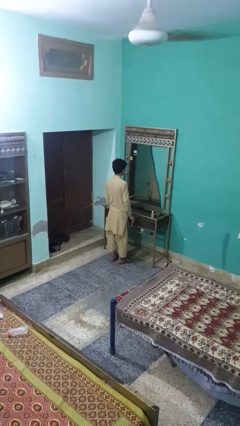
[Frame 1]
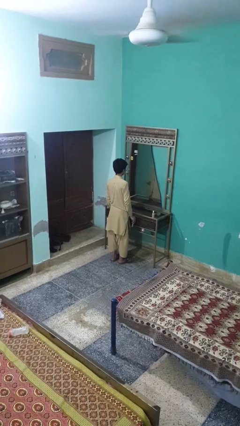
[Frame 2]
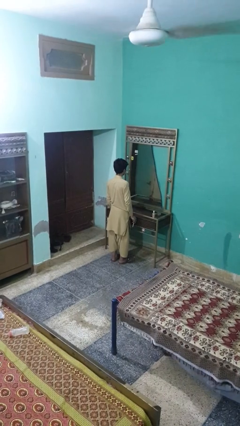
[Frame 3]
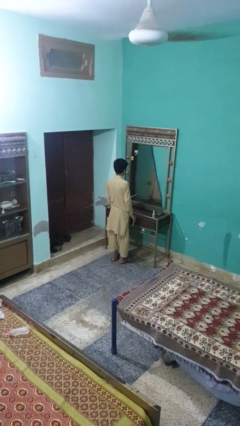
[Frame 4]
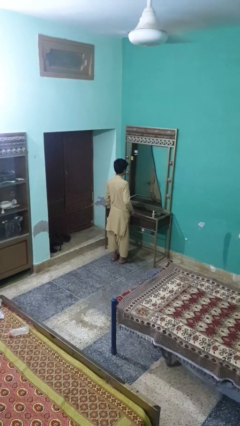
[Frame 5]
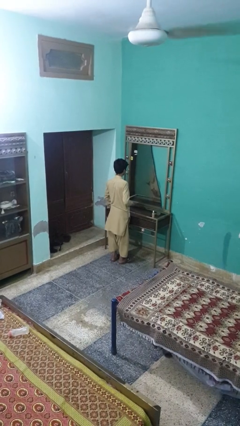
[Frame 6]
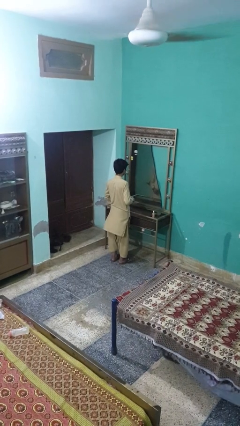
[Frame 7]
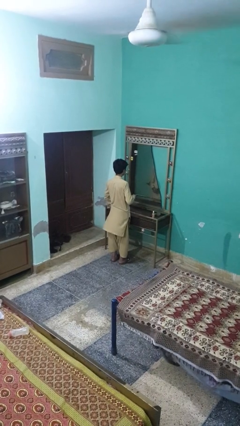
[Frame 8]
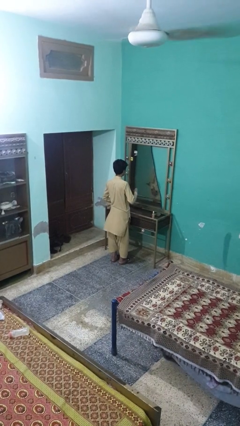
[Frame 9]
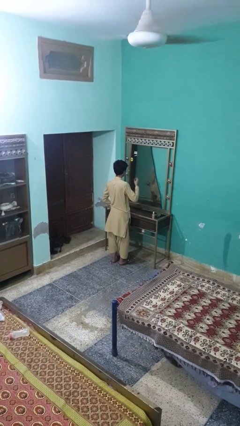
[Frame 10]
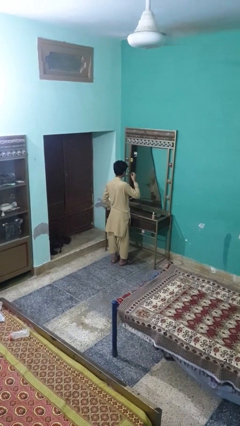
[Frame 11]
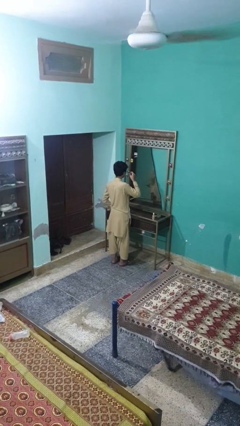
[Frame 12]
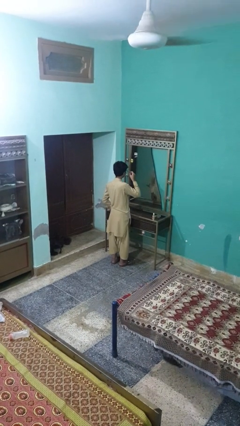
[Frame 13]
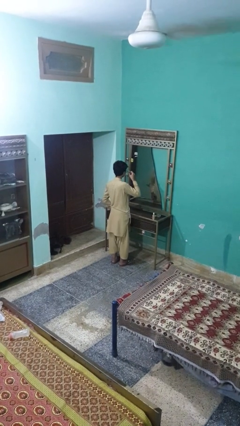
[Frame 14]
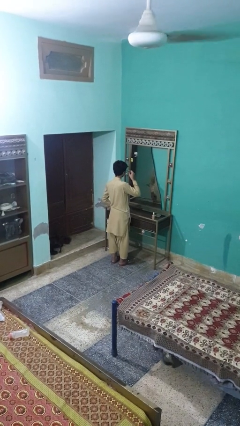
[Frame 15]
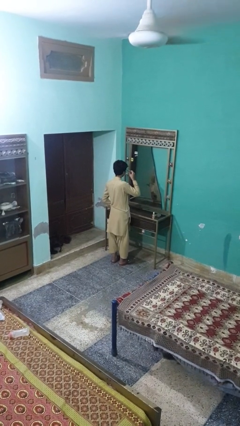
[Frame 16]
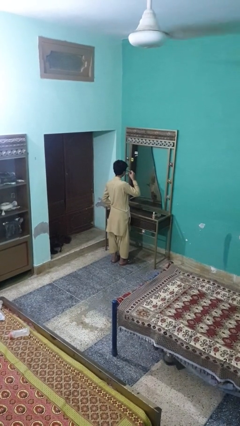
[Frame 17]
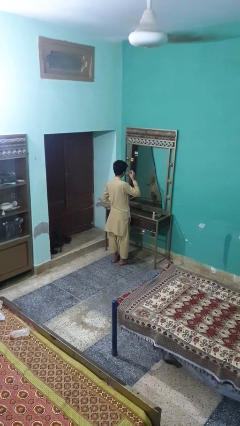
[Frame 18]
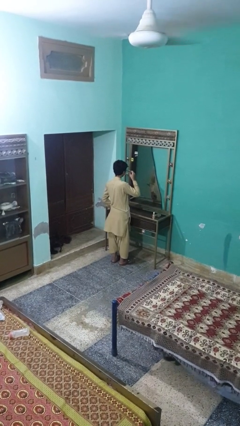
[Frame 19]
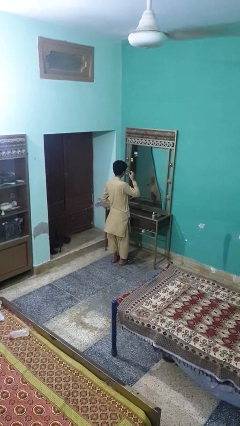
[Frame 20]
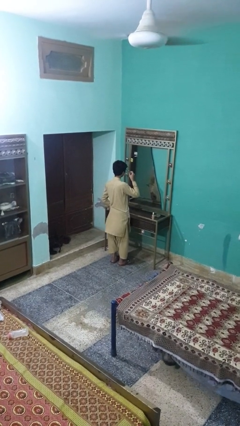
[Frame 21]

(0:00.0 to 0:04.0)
person applies eye makeup

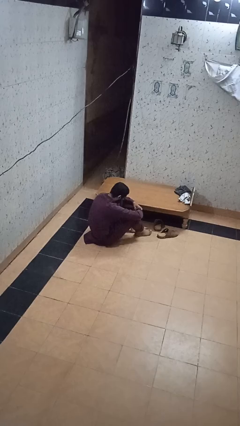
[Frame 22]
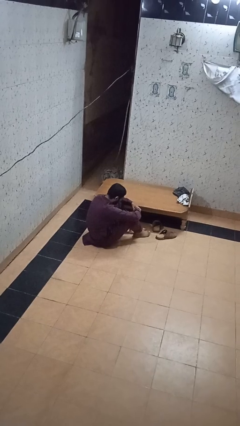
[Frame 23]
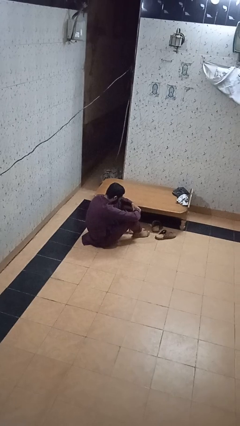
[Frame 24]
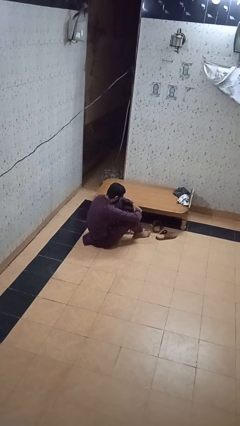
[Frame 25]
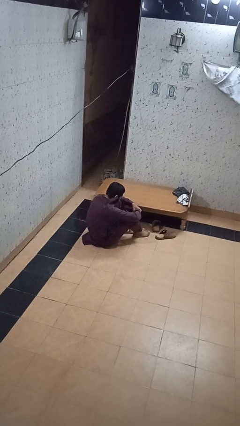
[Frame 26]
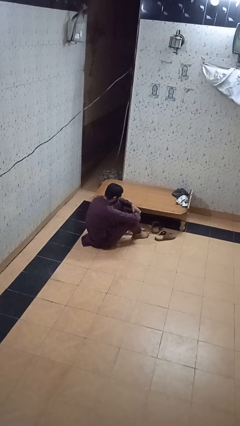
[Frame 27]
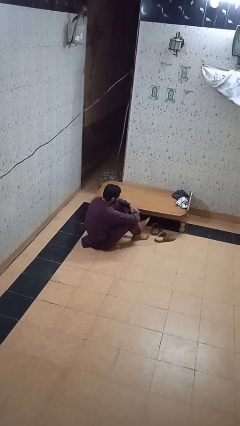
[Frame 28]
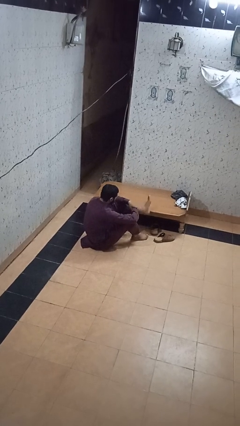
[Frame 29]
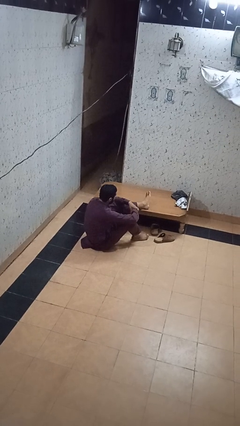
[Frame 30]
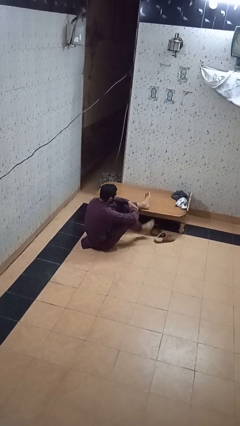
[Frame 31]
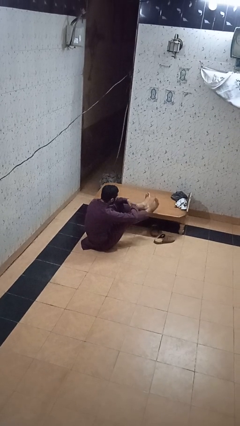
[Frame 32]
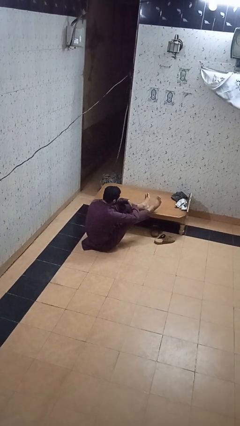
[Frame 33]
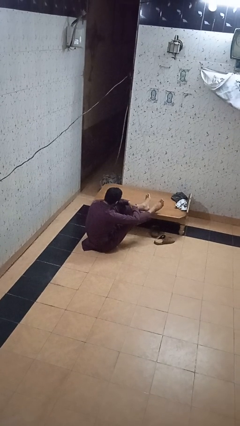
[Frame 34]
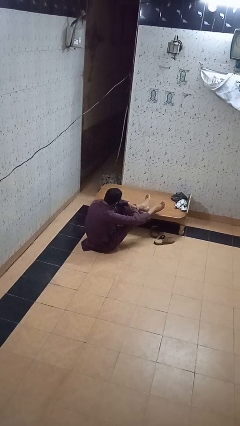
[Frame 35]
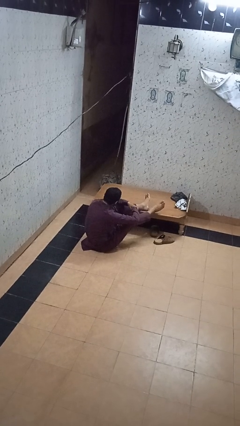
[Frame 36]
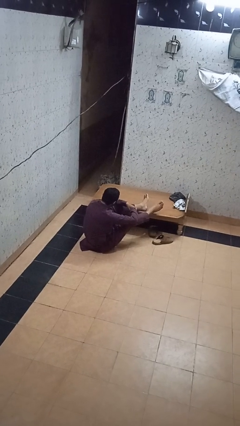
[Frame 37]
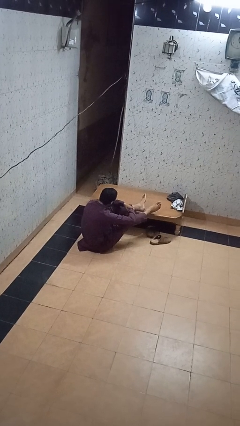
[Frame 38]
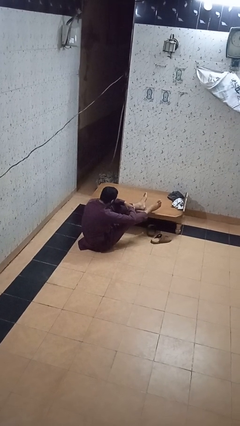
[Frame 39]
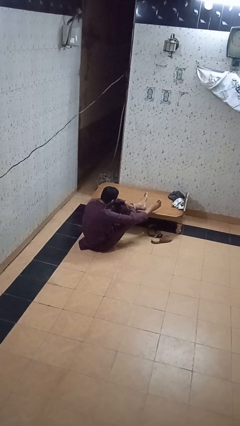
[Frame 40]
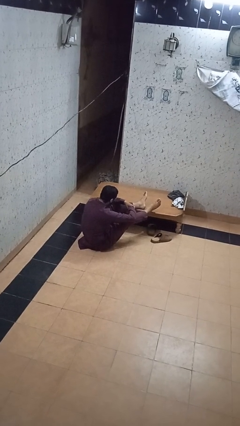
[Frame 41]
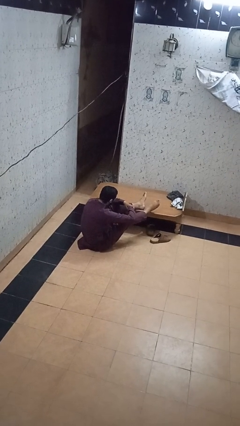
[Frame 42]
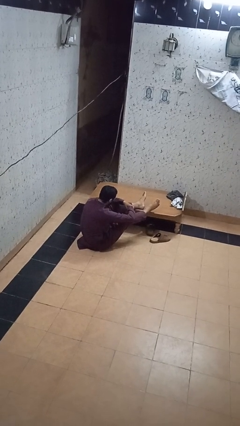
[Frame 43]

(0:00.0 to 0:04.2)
person puts feet up

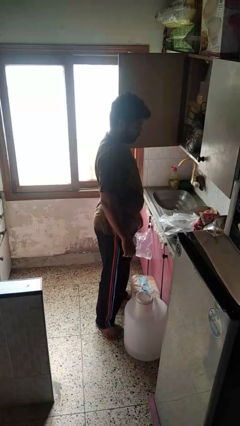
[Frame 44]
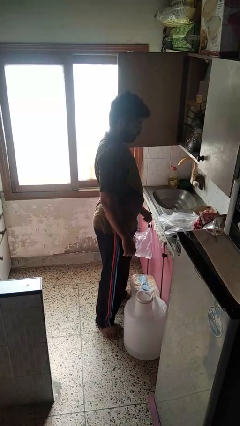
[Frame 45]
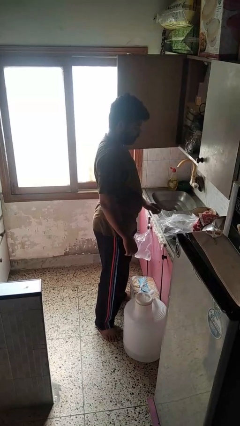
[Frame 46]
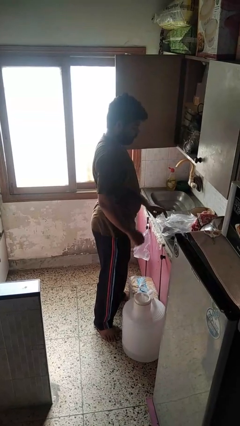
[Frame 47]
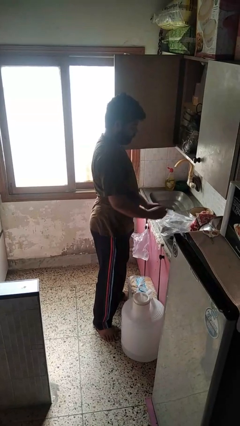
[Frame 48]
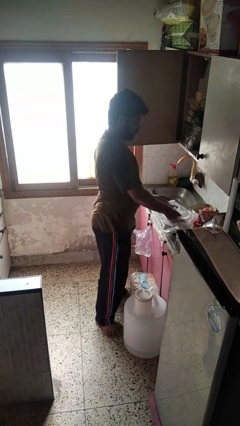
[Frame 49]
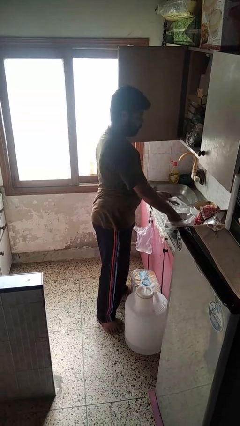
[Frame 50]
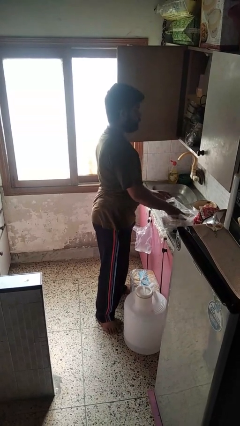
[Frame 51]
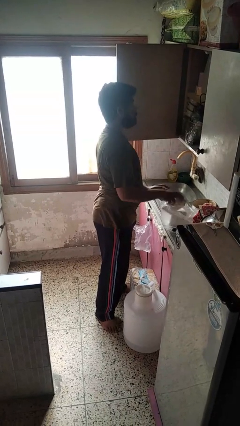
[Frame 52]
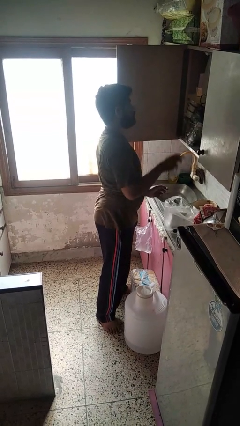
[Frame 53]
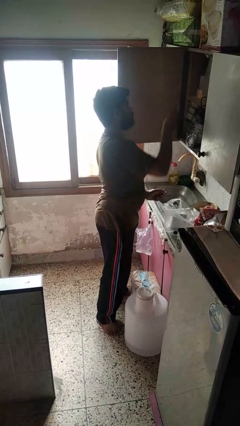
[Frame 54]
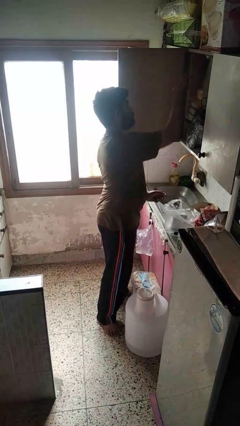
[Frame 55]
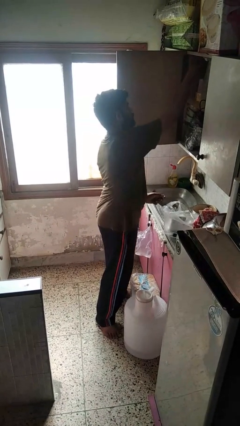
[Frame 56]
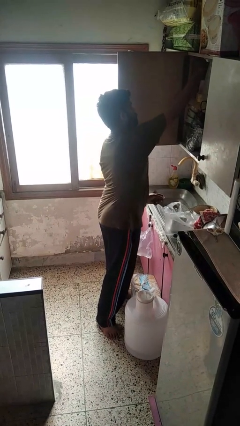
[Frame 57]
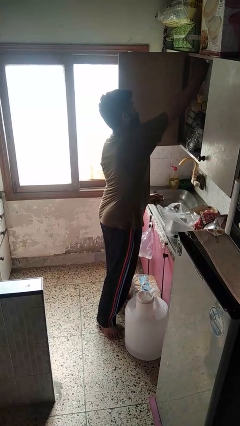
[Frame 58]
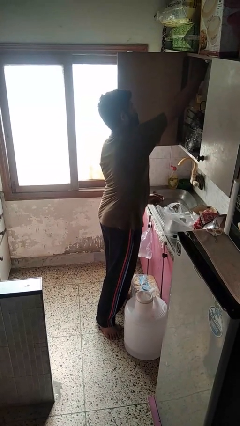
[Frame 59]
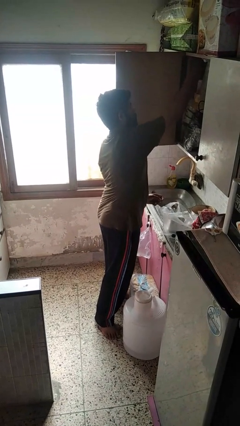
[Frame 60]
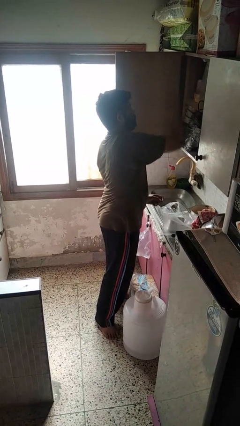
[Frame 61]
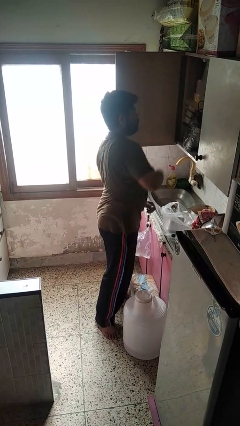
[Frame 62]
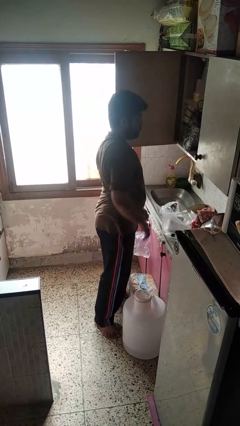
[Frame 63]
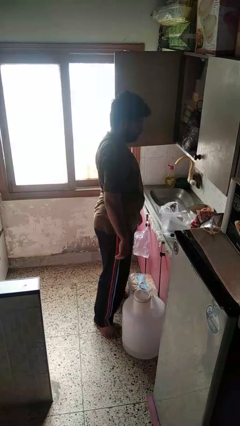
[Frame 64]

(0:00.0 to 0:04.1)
person loads groceries into cabinet

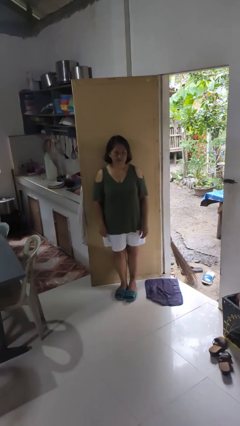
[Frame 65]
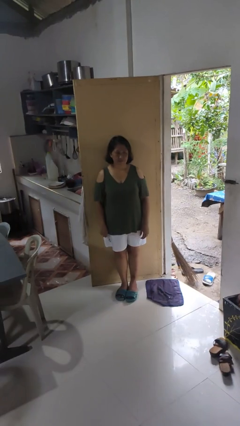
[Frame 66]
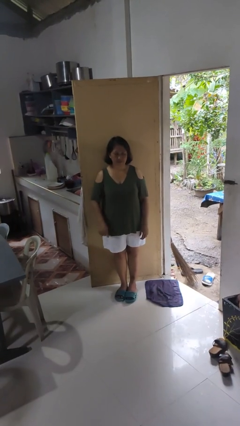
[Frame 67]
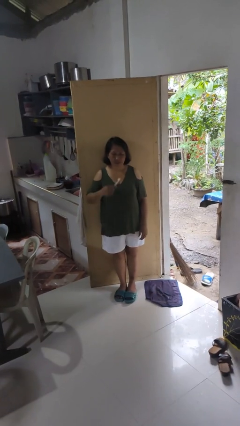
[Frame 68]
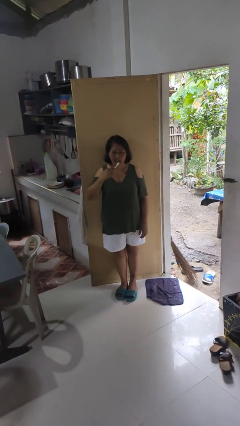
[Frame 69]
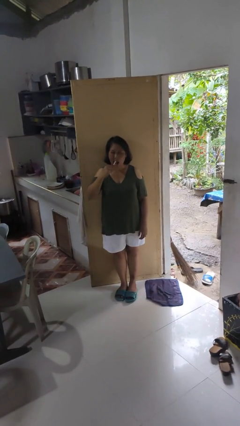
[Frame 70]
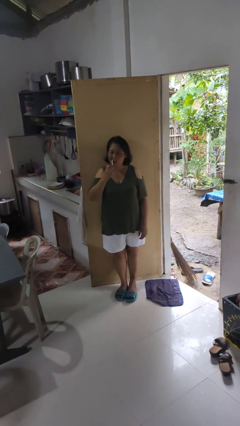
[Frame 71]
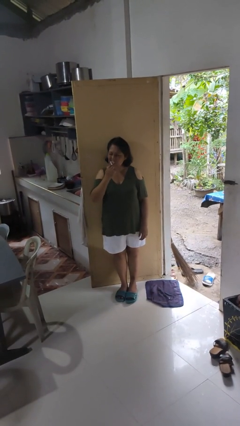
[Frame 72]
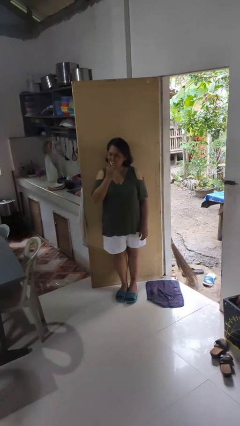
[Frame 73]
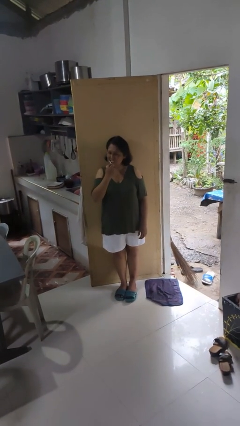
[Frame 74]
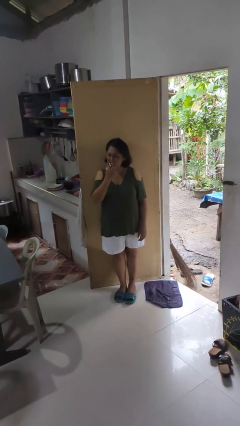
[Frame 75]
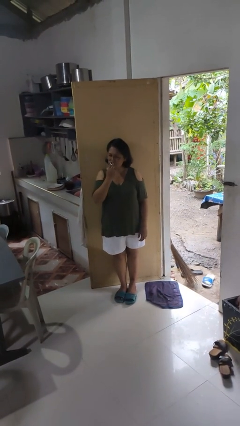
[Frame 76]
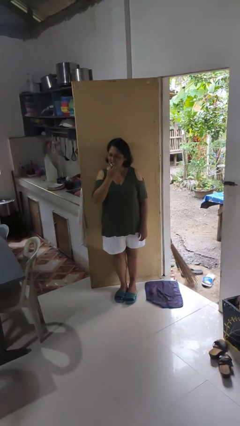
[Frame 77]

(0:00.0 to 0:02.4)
person brushes teeth

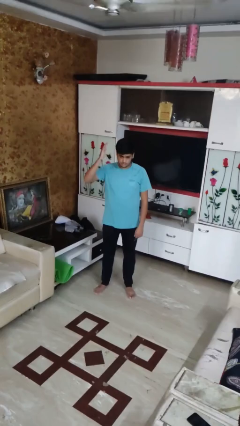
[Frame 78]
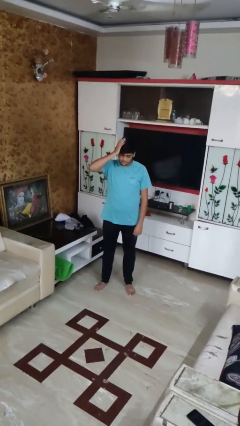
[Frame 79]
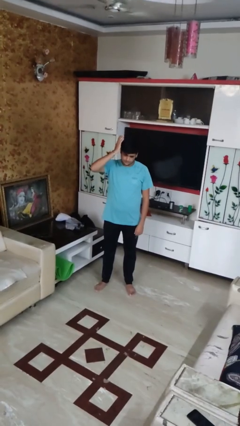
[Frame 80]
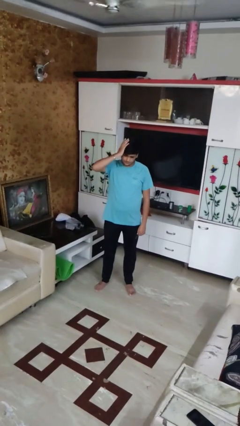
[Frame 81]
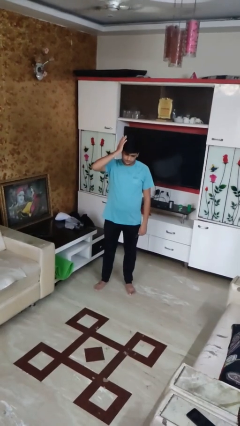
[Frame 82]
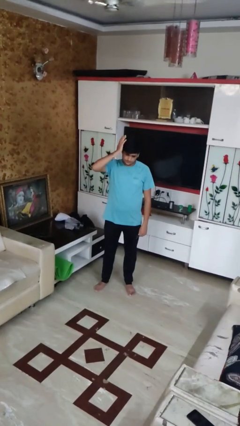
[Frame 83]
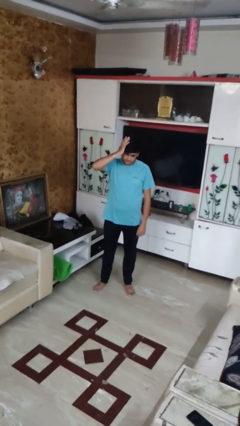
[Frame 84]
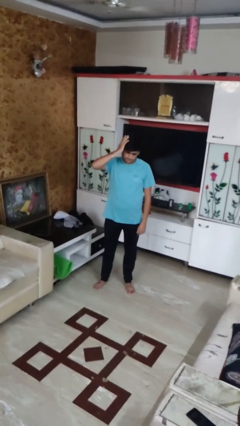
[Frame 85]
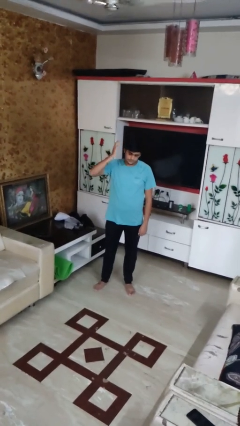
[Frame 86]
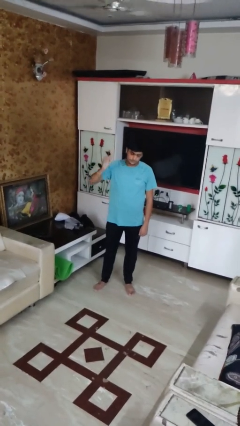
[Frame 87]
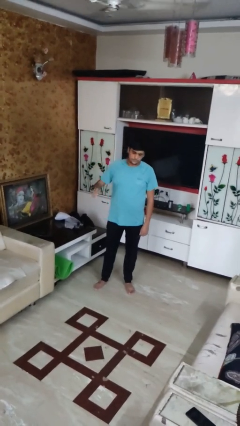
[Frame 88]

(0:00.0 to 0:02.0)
person pats head

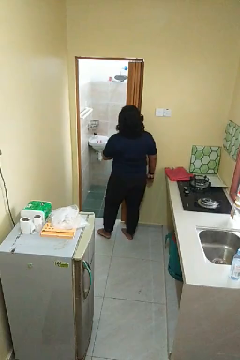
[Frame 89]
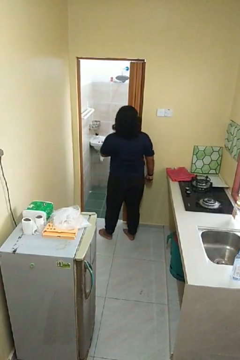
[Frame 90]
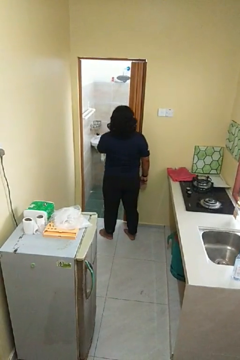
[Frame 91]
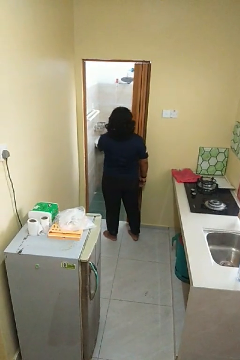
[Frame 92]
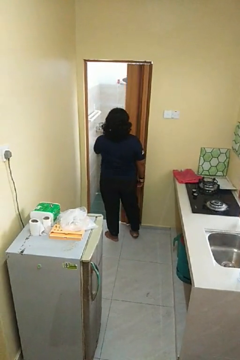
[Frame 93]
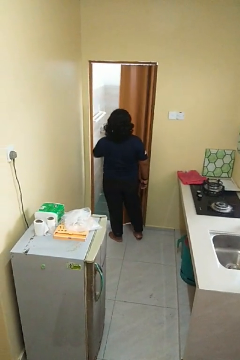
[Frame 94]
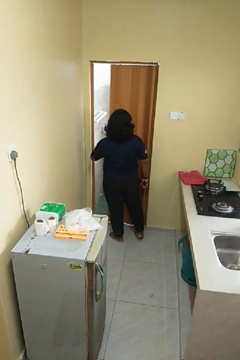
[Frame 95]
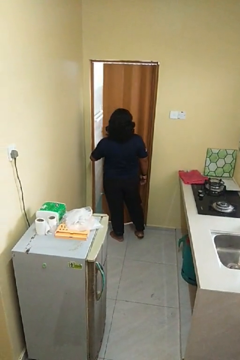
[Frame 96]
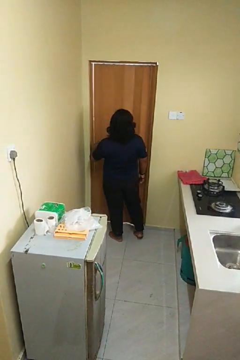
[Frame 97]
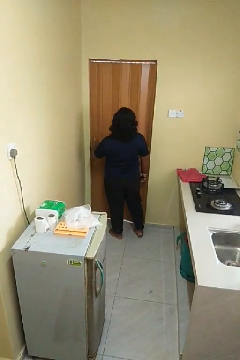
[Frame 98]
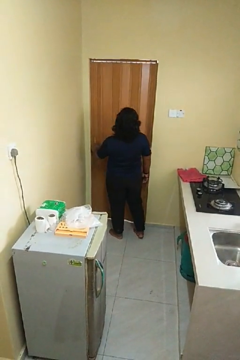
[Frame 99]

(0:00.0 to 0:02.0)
person closes sliding door
